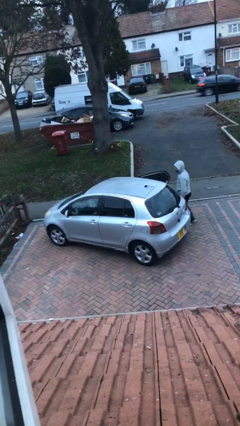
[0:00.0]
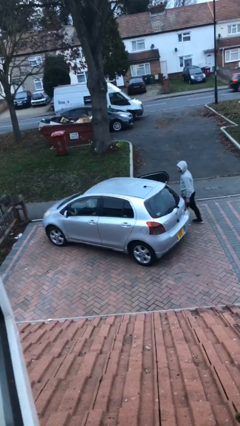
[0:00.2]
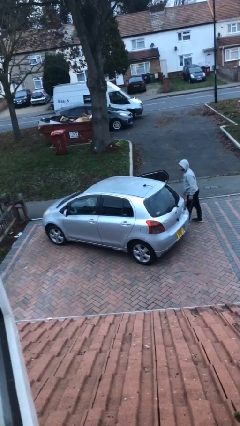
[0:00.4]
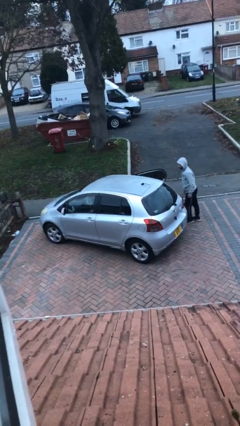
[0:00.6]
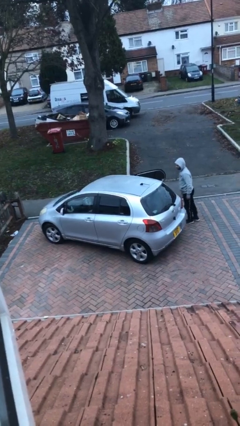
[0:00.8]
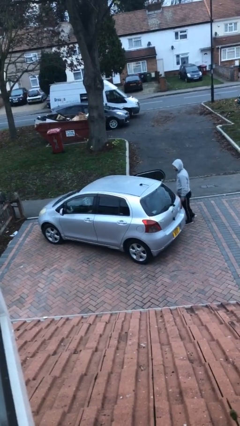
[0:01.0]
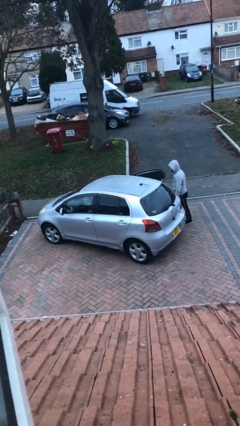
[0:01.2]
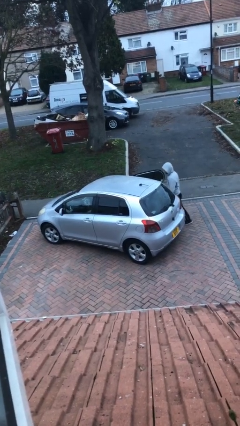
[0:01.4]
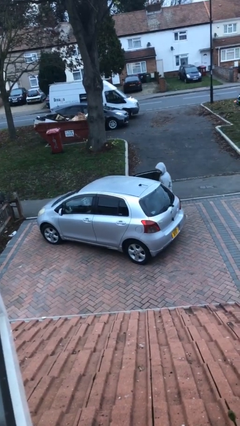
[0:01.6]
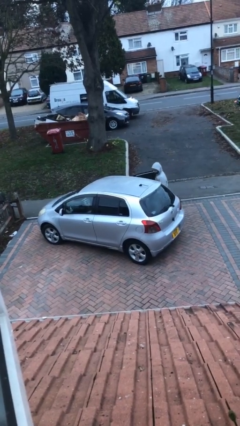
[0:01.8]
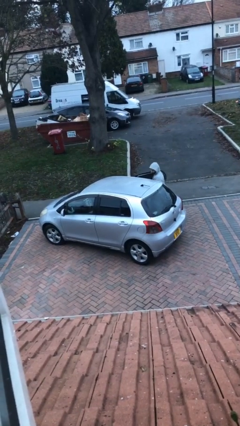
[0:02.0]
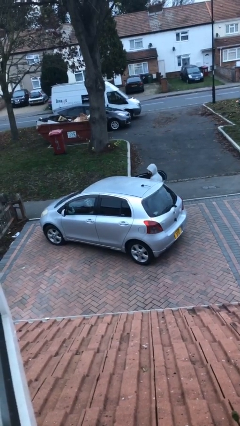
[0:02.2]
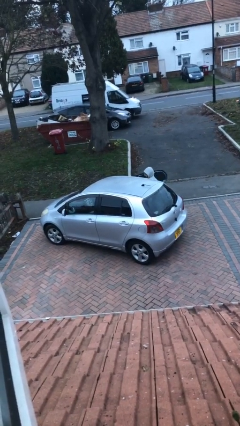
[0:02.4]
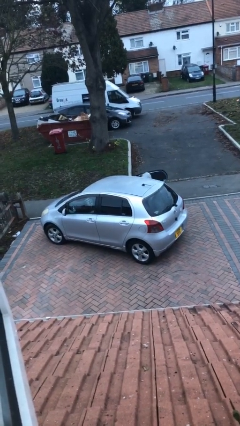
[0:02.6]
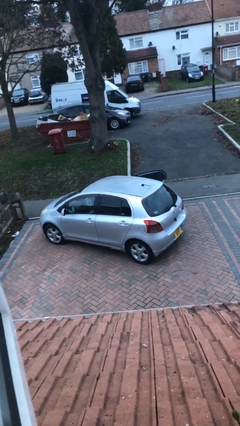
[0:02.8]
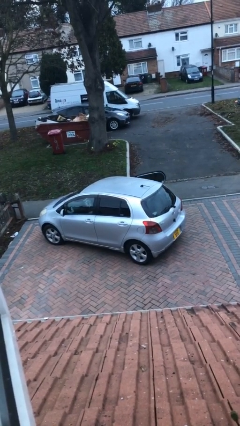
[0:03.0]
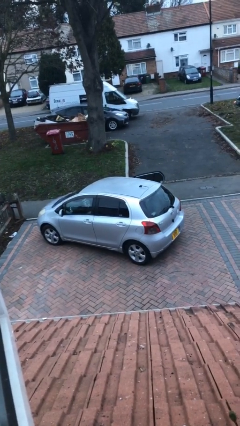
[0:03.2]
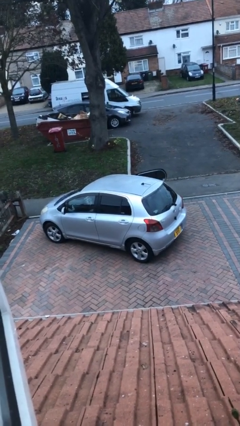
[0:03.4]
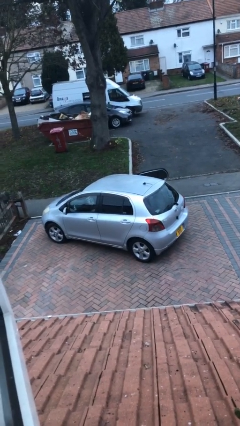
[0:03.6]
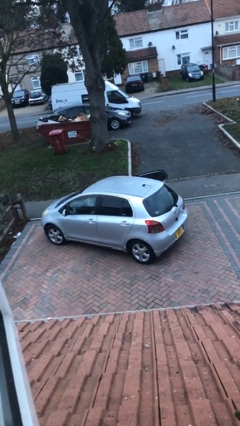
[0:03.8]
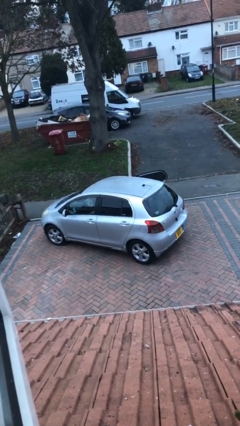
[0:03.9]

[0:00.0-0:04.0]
car picks up person

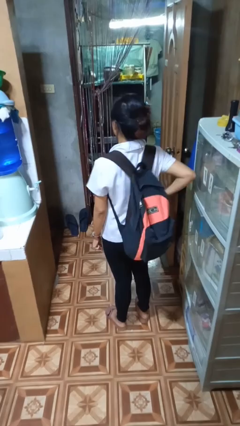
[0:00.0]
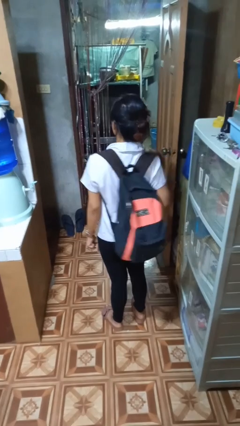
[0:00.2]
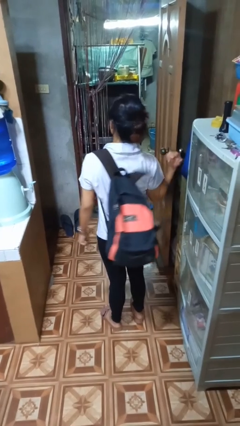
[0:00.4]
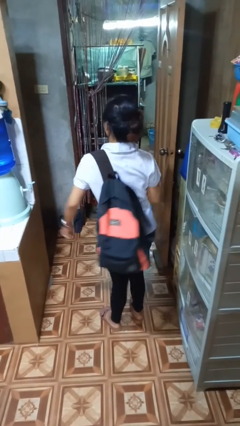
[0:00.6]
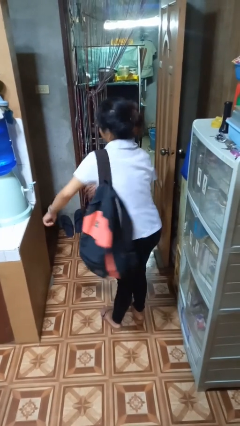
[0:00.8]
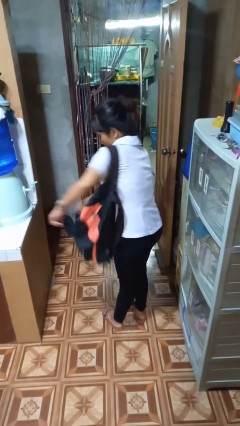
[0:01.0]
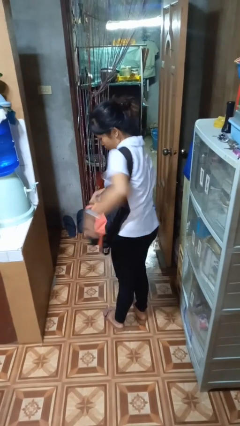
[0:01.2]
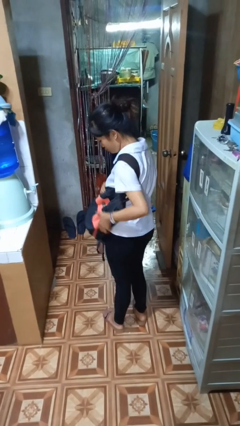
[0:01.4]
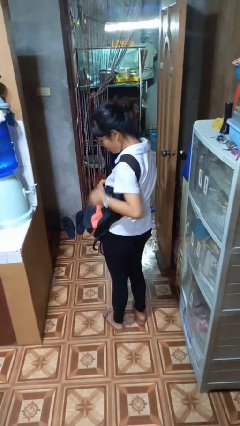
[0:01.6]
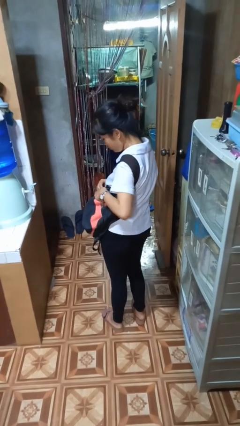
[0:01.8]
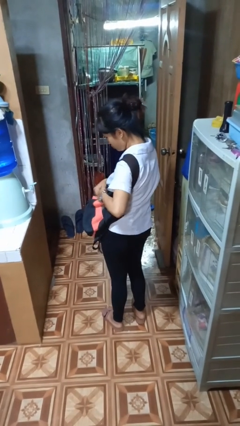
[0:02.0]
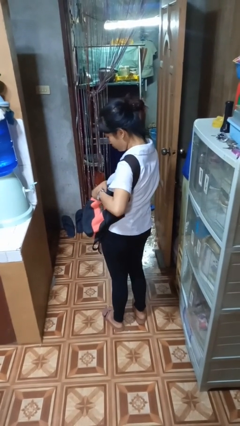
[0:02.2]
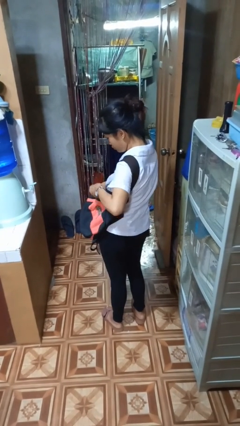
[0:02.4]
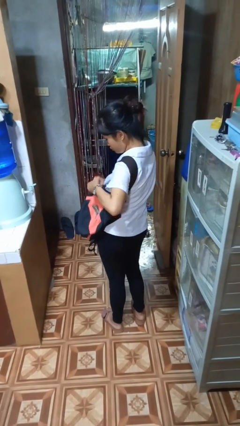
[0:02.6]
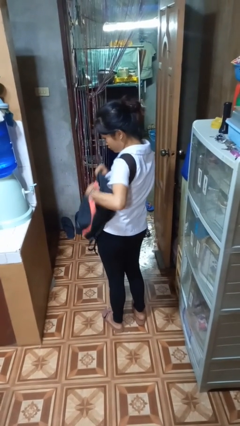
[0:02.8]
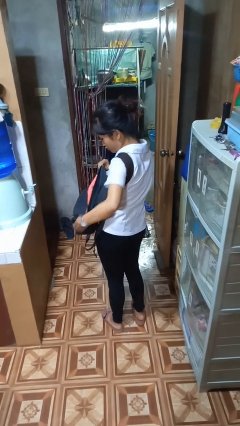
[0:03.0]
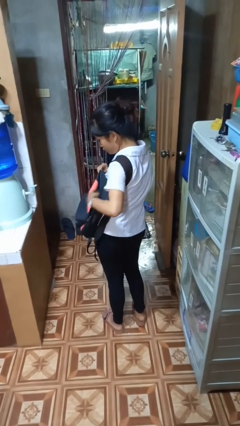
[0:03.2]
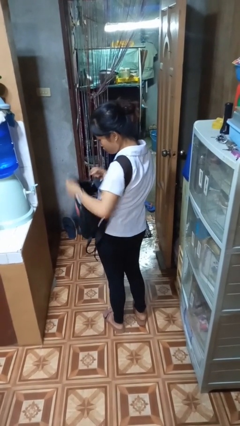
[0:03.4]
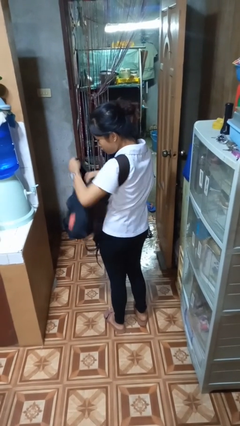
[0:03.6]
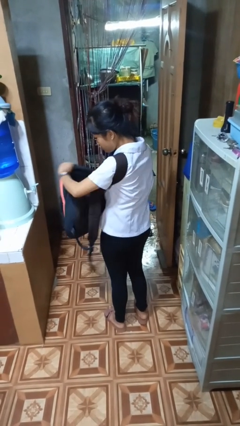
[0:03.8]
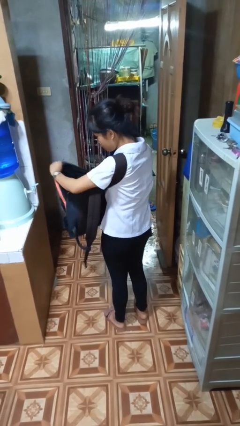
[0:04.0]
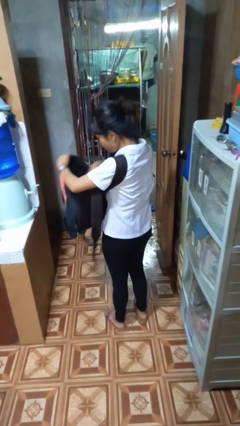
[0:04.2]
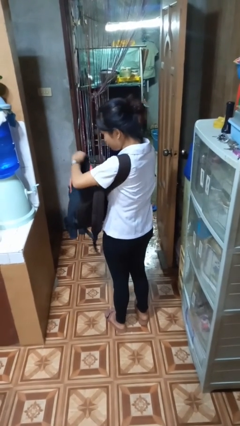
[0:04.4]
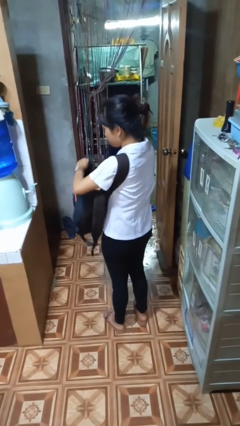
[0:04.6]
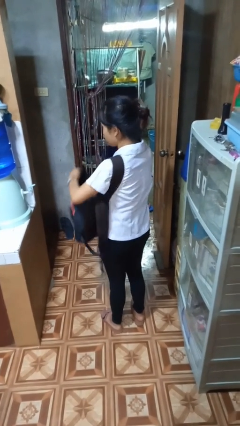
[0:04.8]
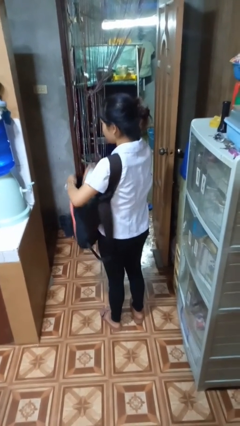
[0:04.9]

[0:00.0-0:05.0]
person searches in backpack

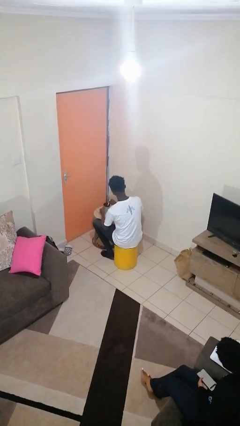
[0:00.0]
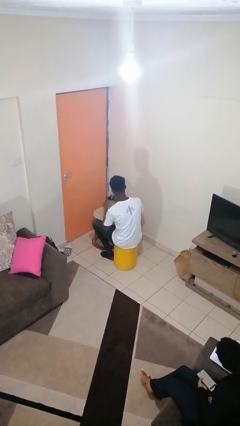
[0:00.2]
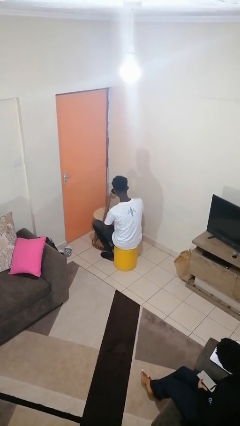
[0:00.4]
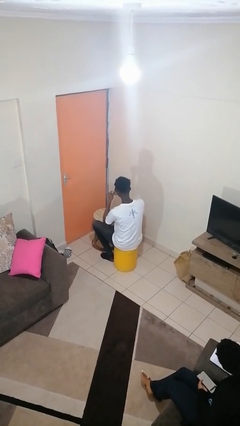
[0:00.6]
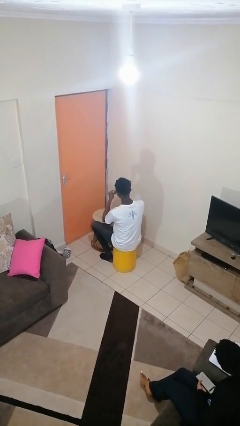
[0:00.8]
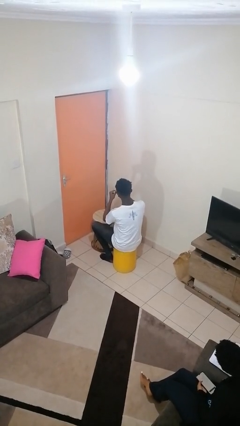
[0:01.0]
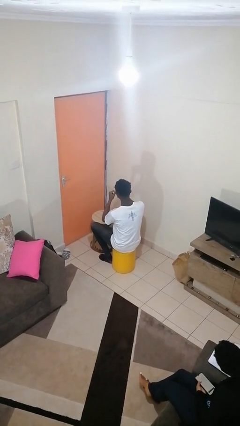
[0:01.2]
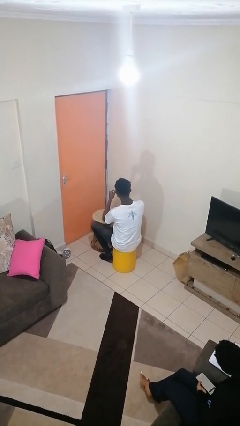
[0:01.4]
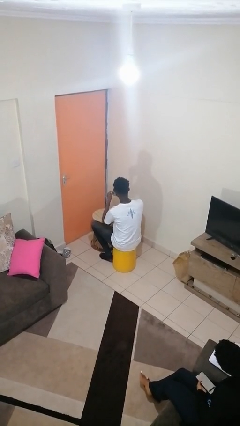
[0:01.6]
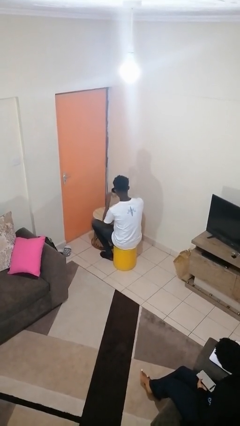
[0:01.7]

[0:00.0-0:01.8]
person drinks from mug

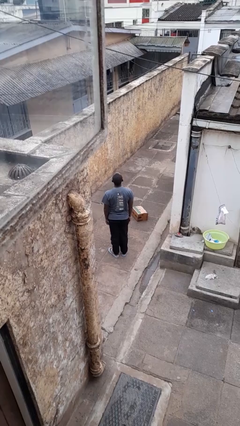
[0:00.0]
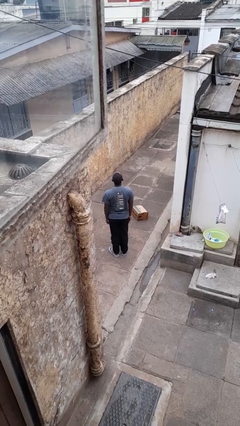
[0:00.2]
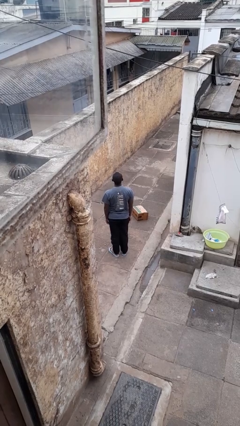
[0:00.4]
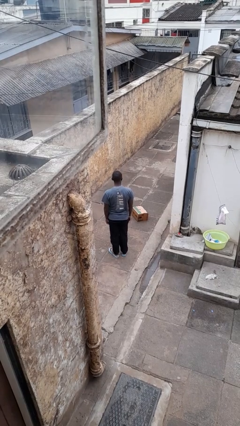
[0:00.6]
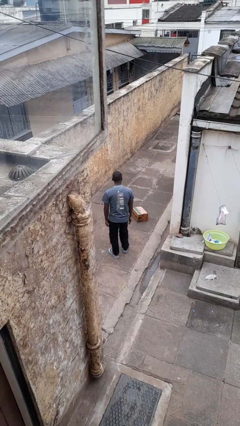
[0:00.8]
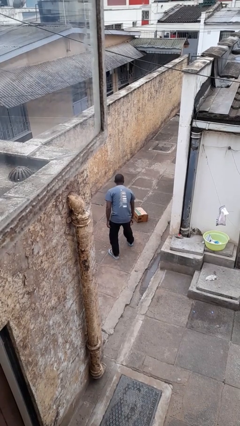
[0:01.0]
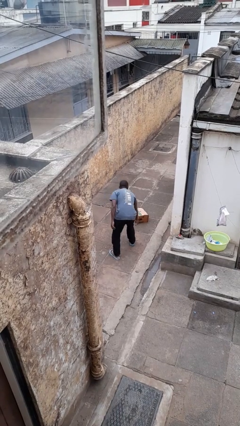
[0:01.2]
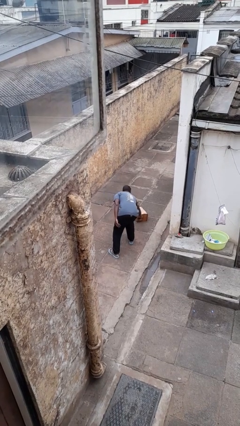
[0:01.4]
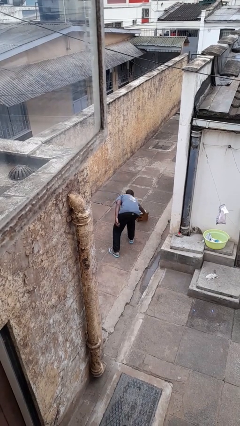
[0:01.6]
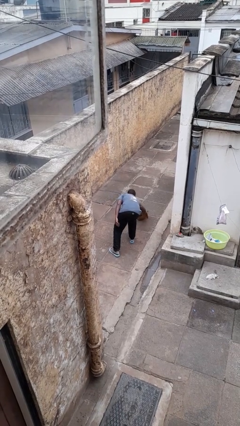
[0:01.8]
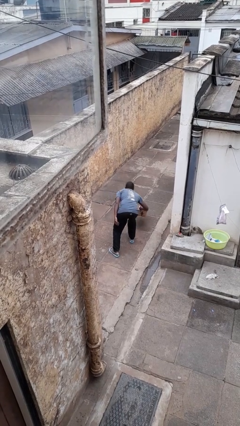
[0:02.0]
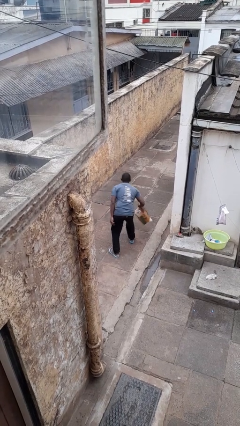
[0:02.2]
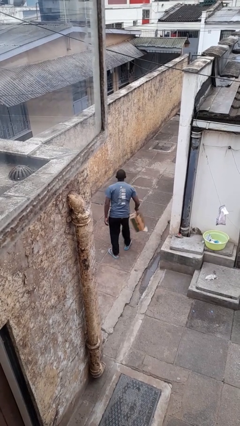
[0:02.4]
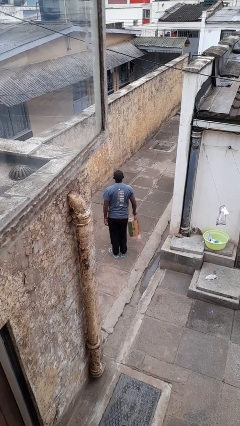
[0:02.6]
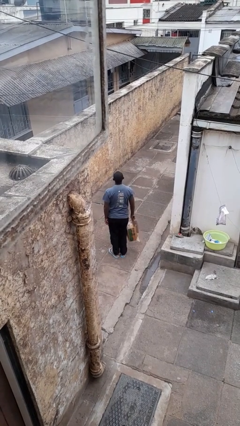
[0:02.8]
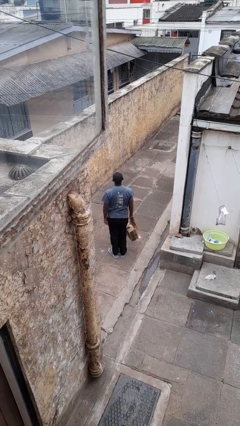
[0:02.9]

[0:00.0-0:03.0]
person picks up object from floor

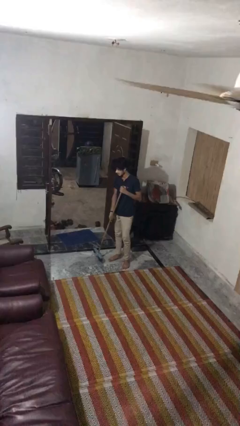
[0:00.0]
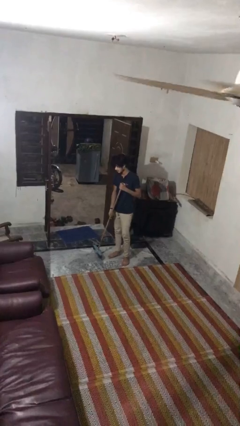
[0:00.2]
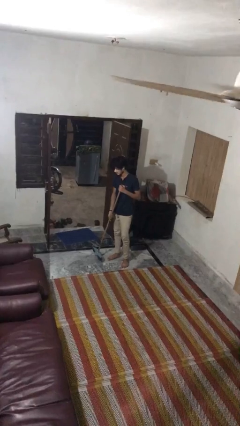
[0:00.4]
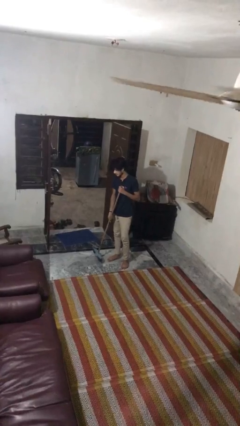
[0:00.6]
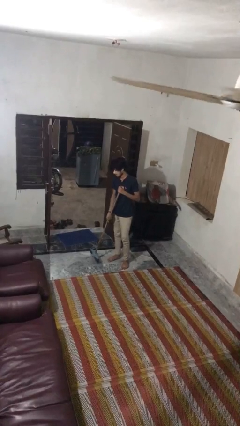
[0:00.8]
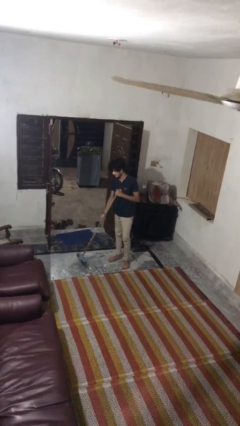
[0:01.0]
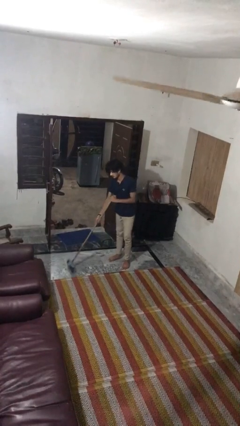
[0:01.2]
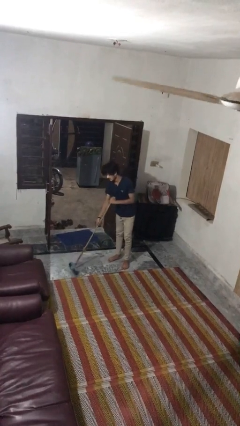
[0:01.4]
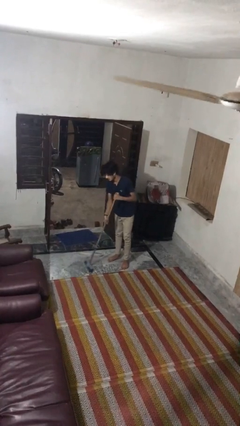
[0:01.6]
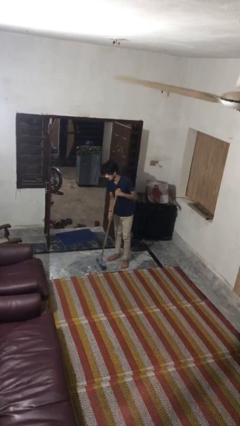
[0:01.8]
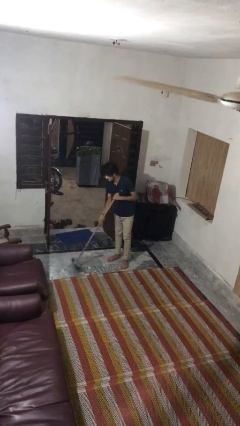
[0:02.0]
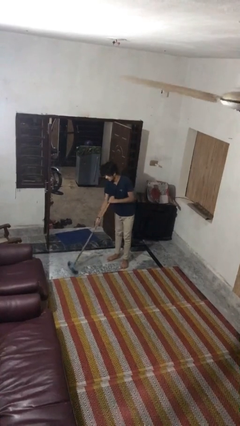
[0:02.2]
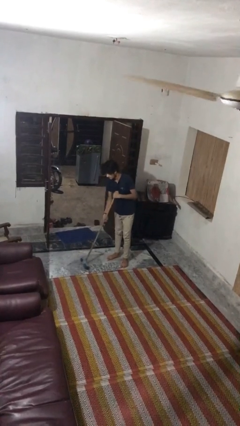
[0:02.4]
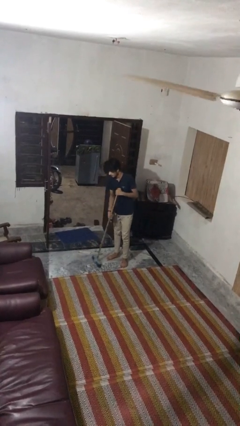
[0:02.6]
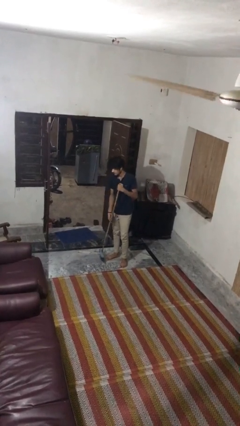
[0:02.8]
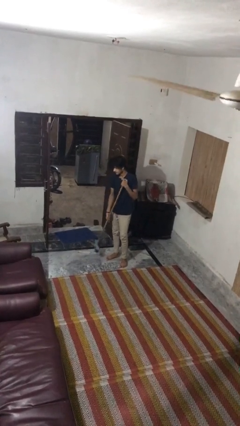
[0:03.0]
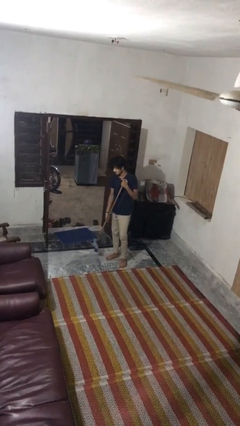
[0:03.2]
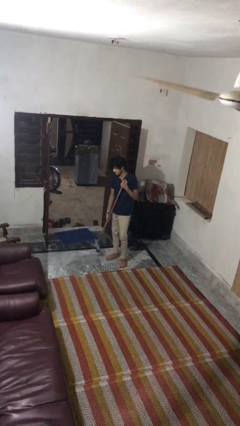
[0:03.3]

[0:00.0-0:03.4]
person sweeps floor

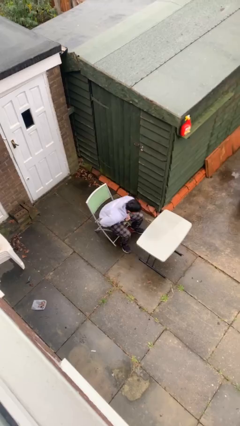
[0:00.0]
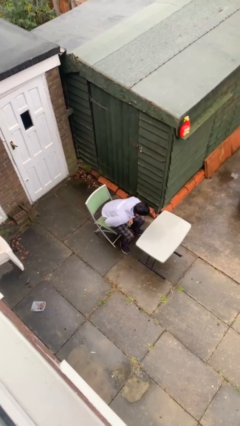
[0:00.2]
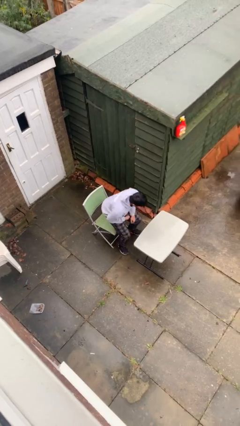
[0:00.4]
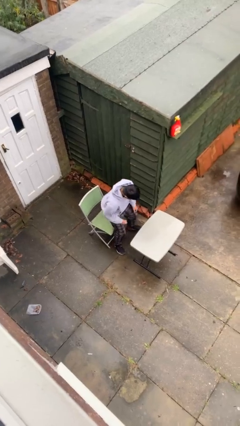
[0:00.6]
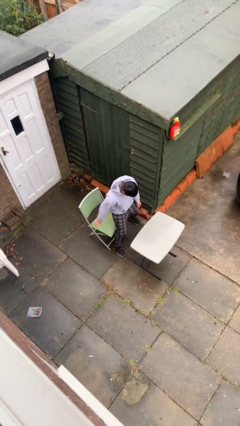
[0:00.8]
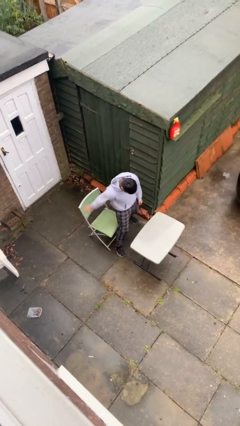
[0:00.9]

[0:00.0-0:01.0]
person stands up
